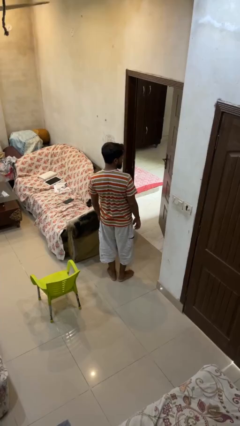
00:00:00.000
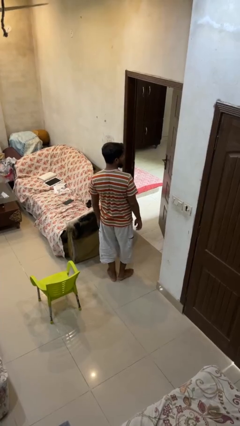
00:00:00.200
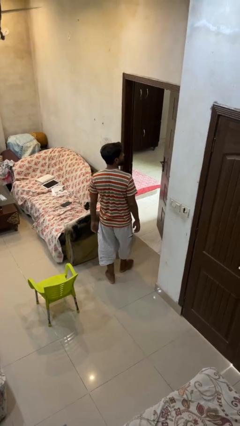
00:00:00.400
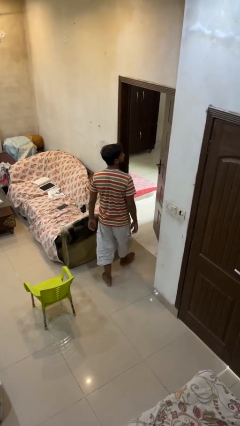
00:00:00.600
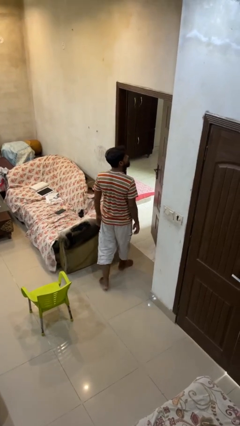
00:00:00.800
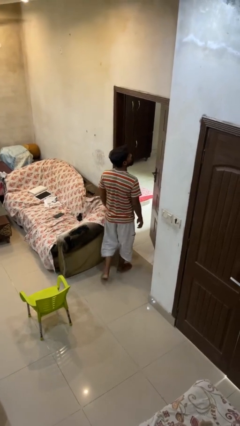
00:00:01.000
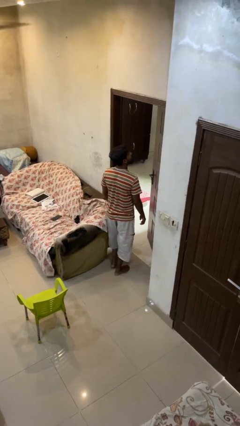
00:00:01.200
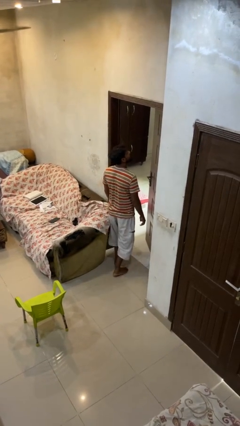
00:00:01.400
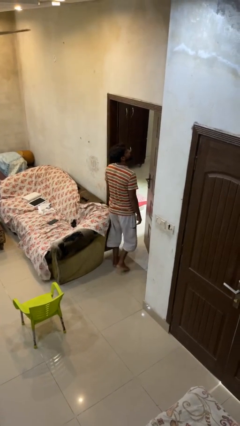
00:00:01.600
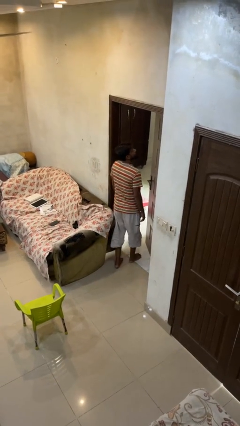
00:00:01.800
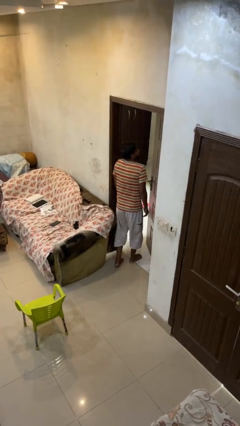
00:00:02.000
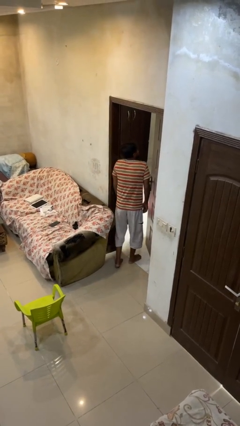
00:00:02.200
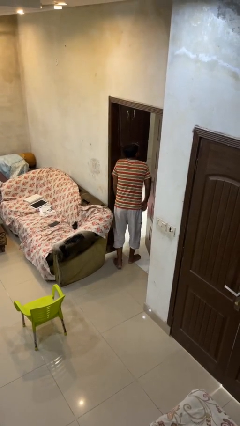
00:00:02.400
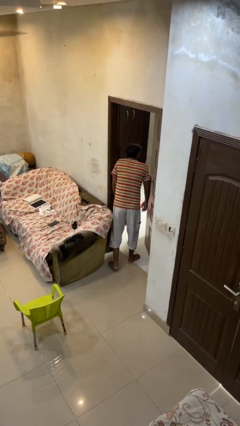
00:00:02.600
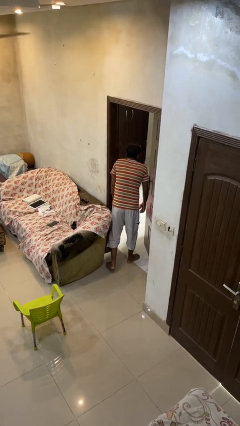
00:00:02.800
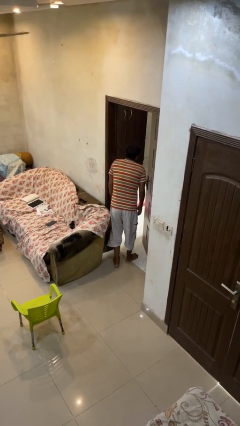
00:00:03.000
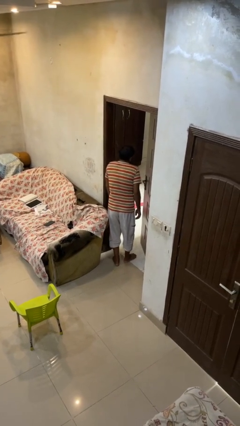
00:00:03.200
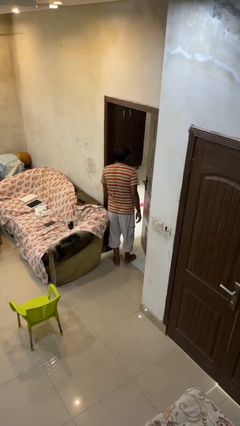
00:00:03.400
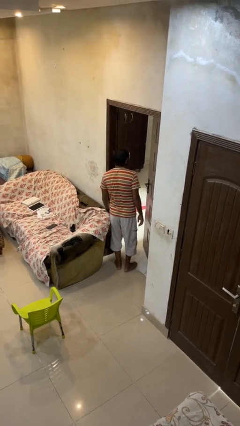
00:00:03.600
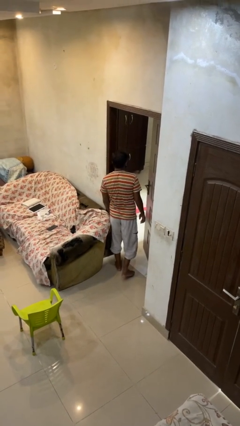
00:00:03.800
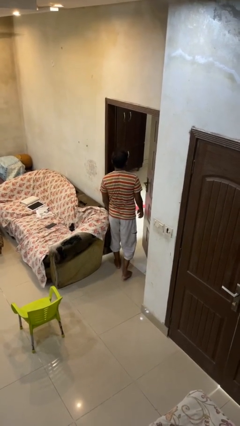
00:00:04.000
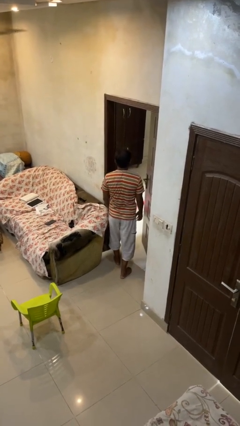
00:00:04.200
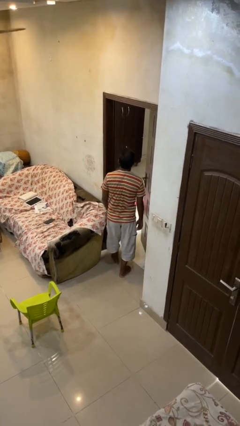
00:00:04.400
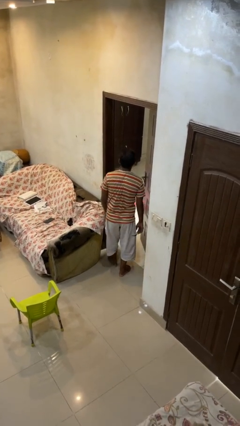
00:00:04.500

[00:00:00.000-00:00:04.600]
person bumps into wall

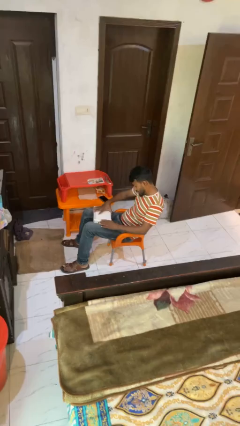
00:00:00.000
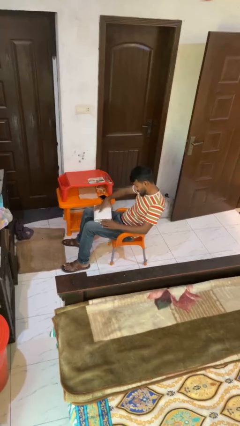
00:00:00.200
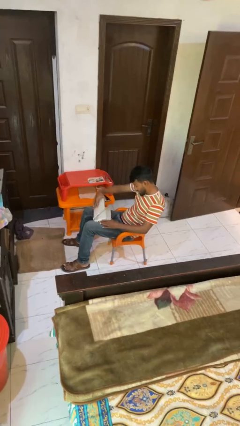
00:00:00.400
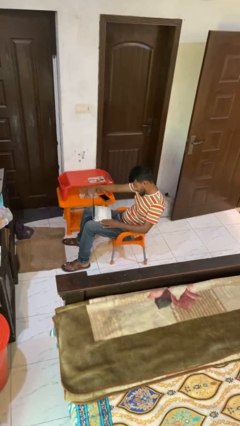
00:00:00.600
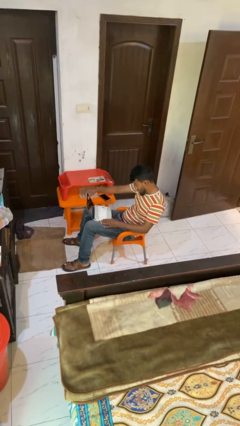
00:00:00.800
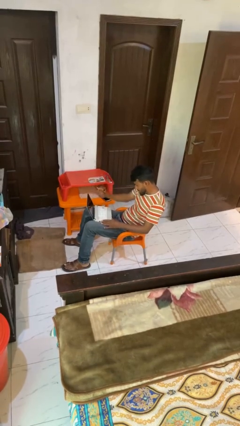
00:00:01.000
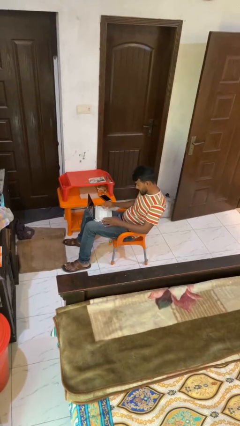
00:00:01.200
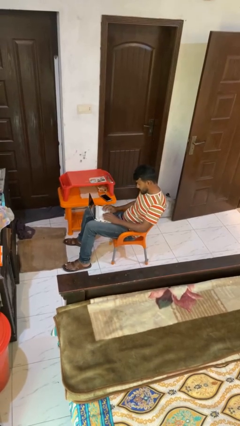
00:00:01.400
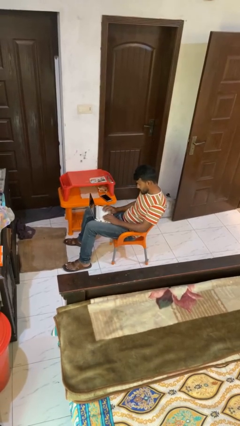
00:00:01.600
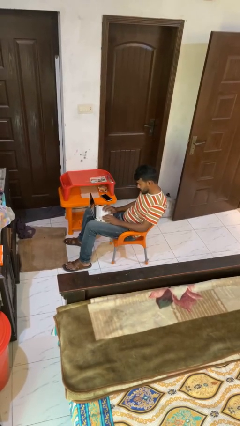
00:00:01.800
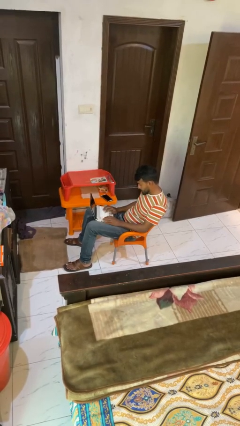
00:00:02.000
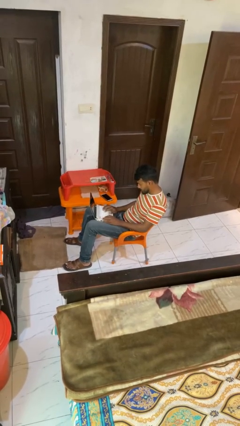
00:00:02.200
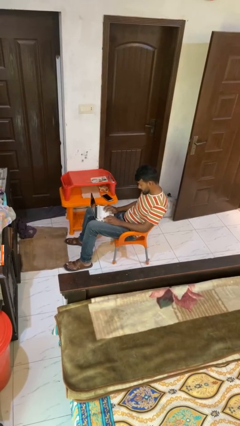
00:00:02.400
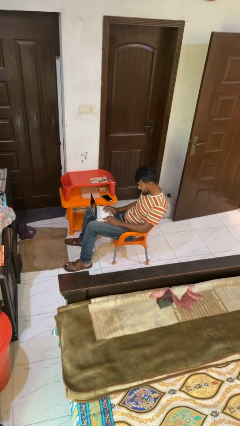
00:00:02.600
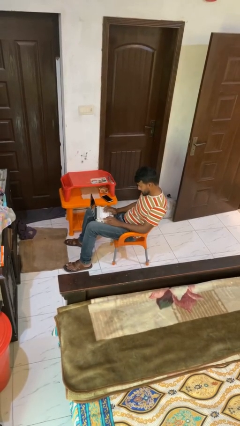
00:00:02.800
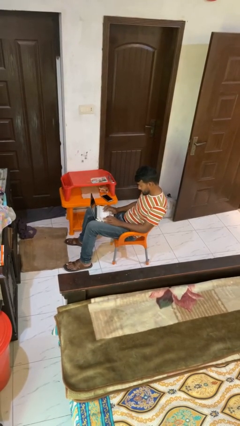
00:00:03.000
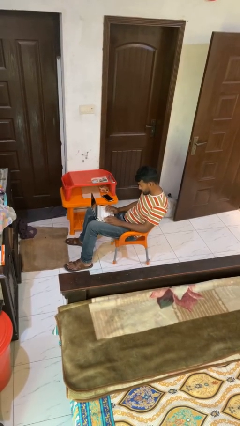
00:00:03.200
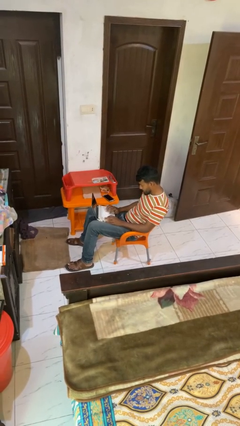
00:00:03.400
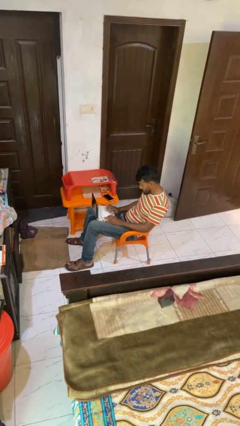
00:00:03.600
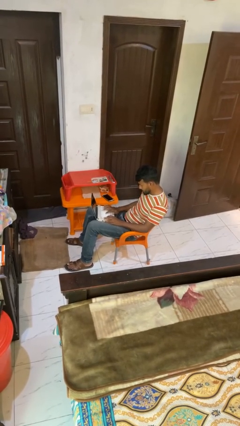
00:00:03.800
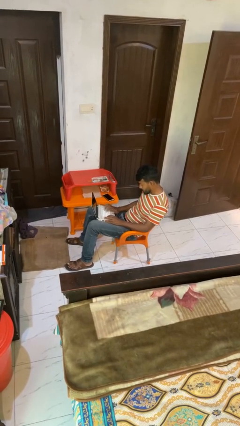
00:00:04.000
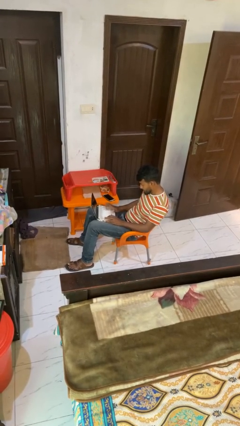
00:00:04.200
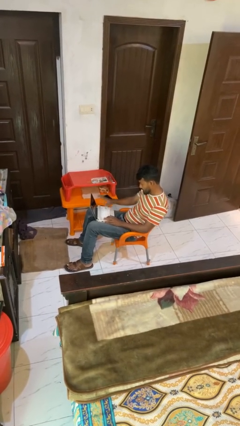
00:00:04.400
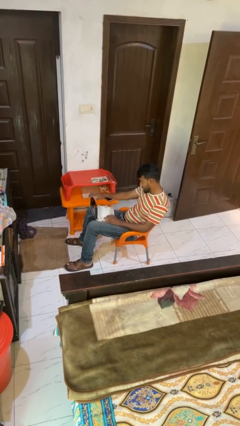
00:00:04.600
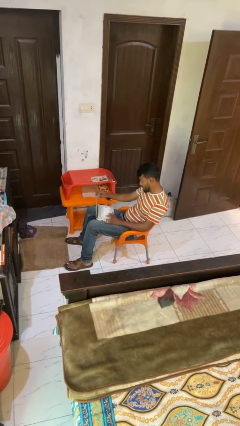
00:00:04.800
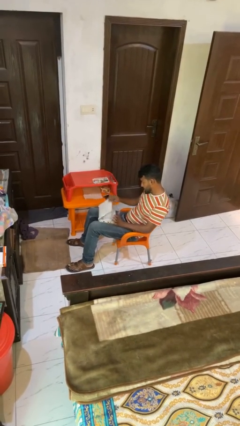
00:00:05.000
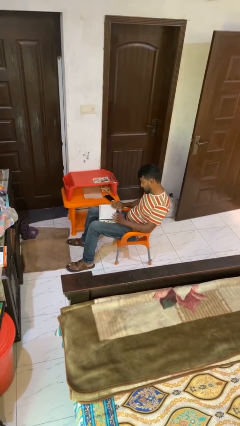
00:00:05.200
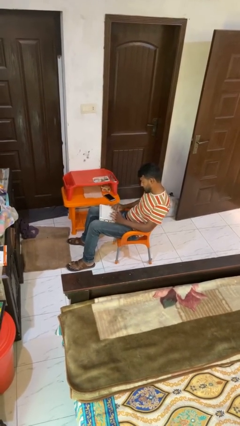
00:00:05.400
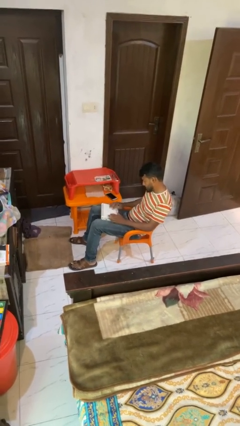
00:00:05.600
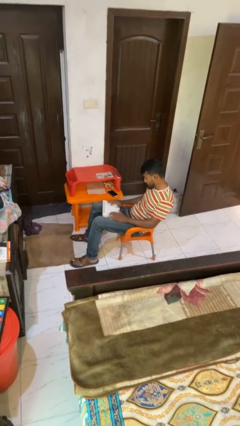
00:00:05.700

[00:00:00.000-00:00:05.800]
person interacts with laptop

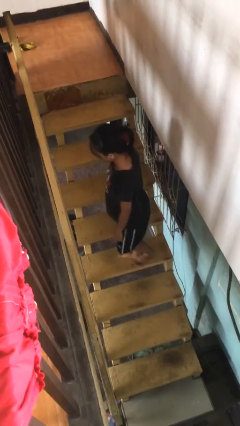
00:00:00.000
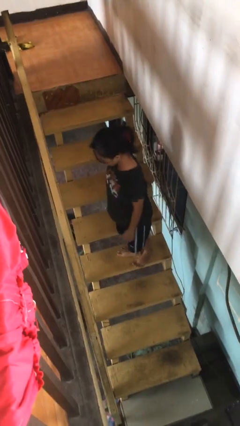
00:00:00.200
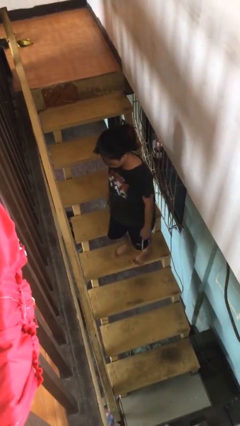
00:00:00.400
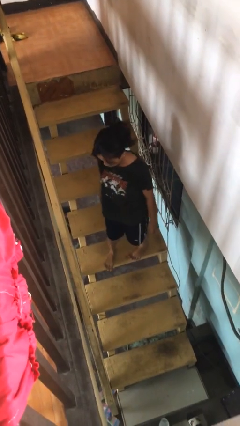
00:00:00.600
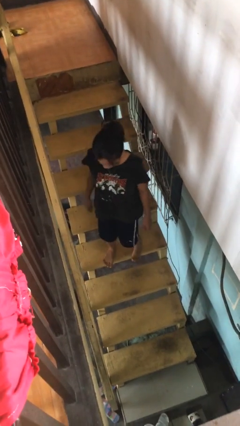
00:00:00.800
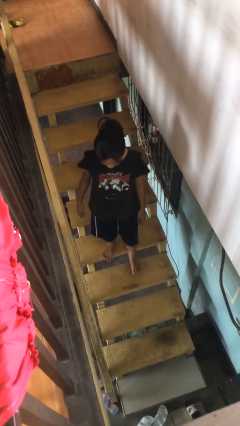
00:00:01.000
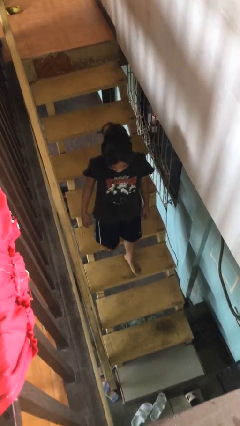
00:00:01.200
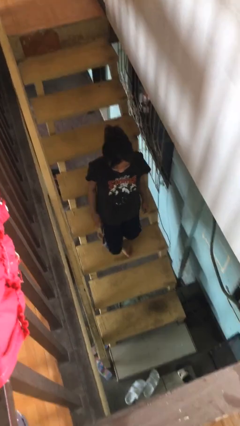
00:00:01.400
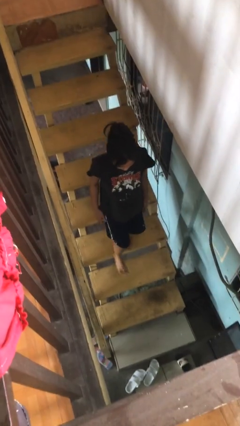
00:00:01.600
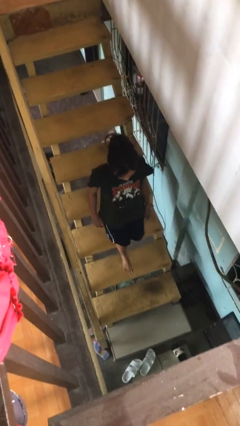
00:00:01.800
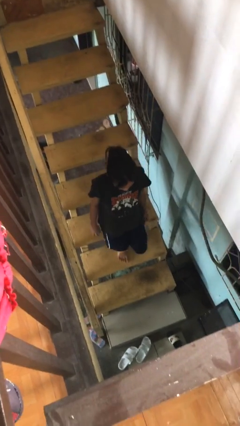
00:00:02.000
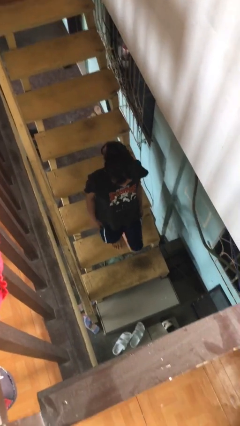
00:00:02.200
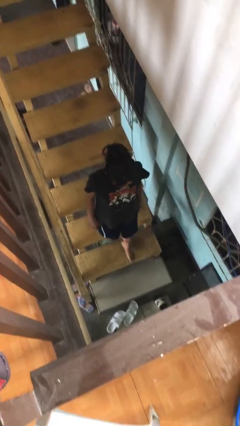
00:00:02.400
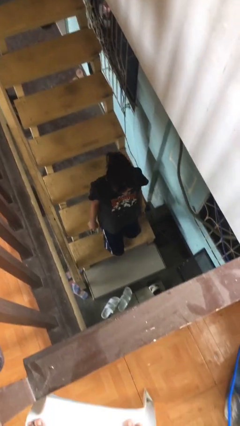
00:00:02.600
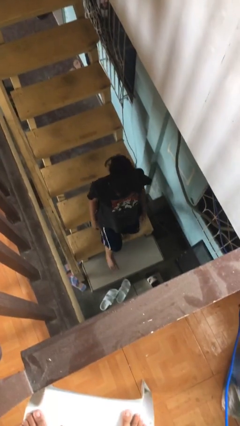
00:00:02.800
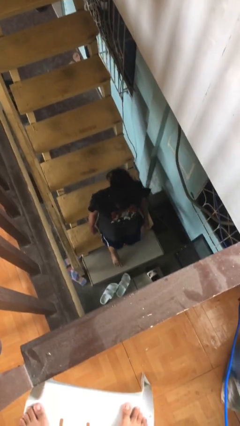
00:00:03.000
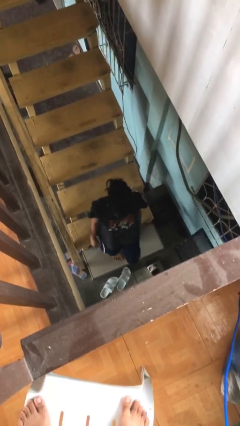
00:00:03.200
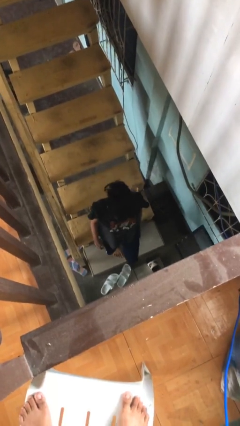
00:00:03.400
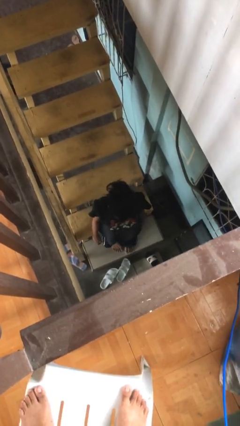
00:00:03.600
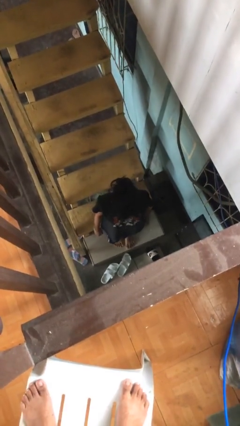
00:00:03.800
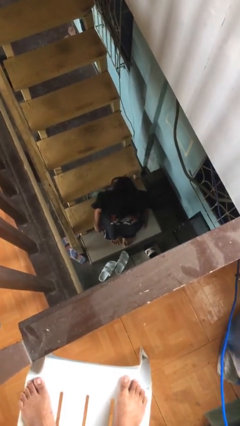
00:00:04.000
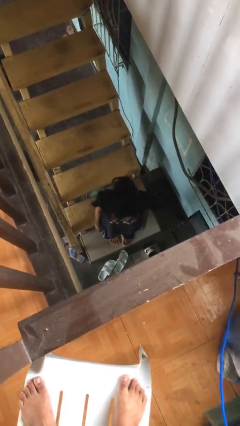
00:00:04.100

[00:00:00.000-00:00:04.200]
person climbs down stairs

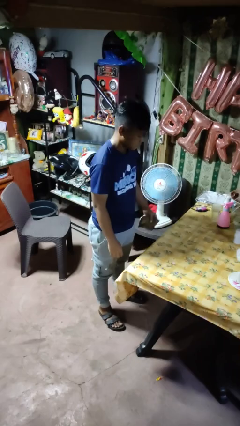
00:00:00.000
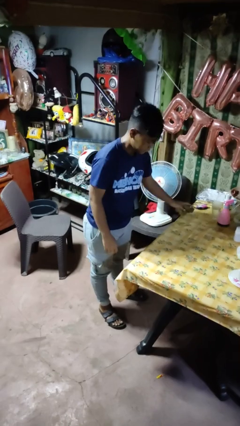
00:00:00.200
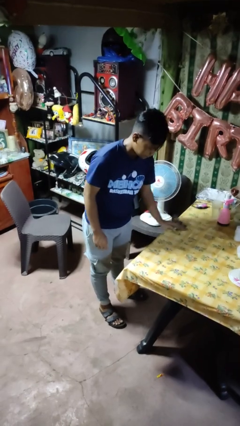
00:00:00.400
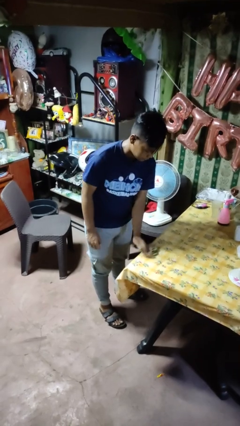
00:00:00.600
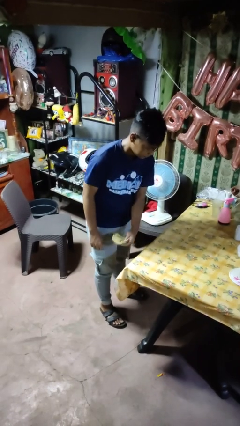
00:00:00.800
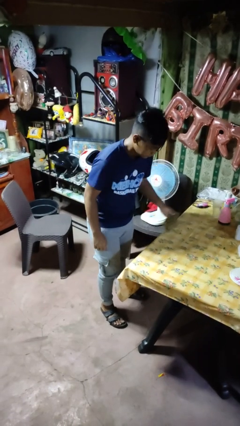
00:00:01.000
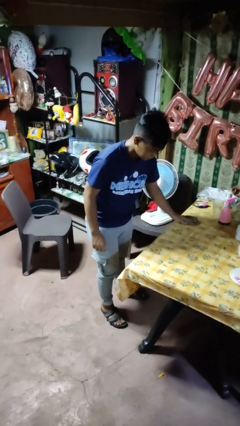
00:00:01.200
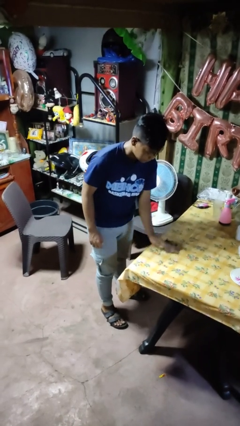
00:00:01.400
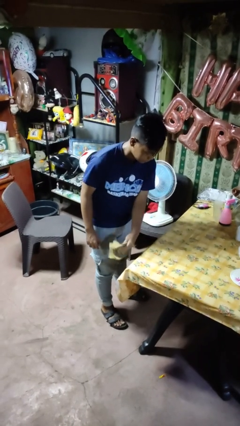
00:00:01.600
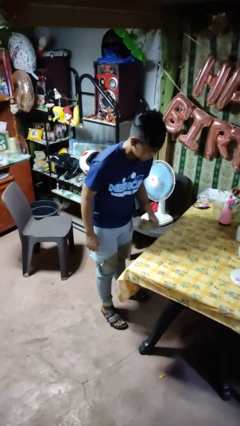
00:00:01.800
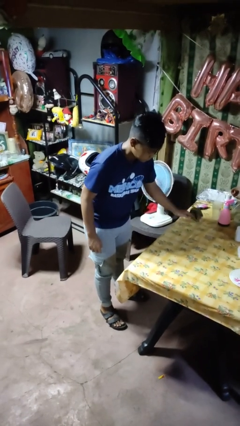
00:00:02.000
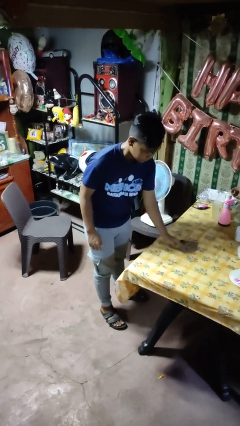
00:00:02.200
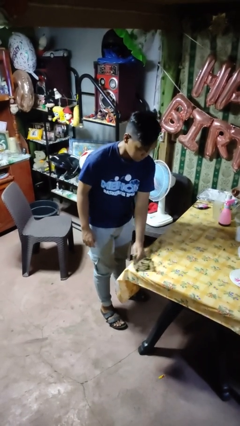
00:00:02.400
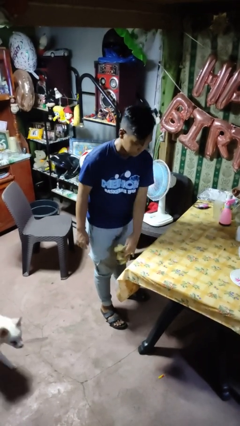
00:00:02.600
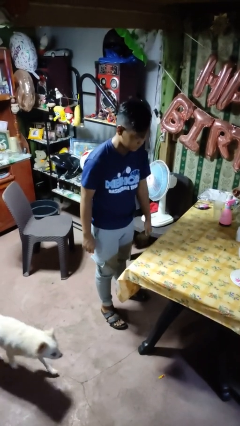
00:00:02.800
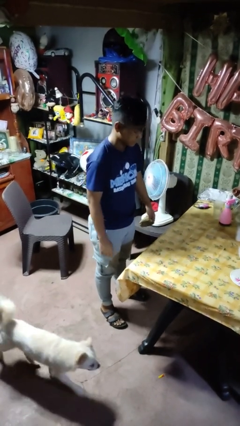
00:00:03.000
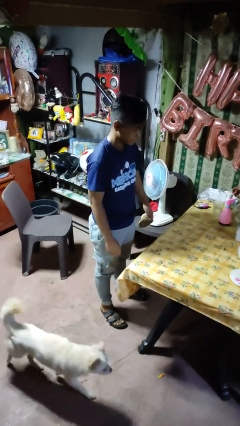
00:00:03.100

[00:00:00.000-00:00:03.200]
person cleans table with rag
